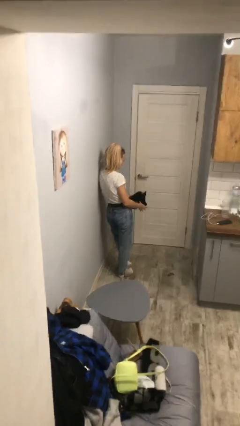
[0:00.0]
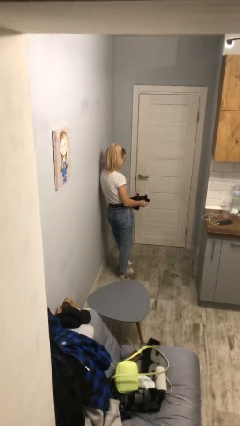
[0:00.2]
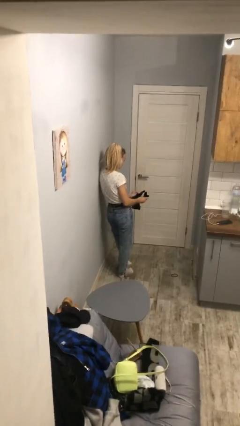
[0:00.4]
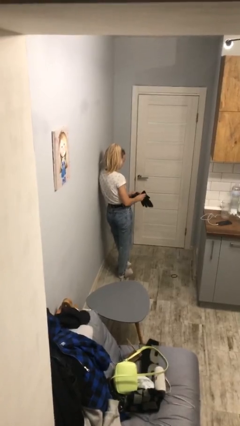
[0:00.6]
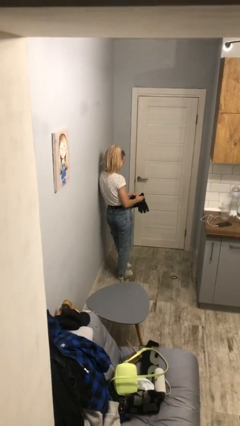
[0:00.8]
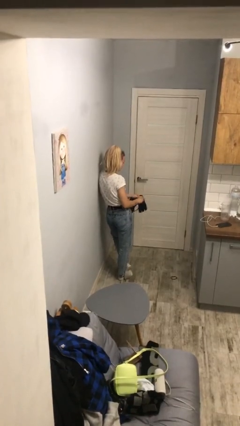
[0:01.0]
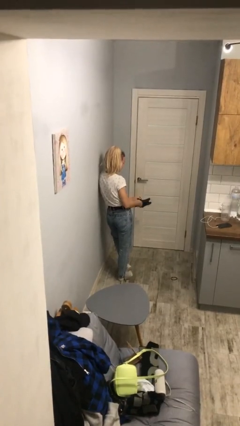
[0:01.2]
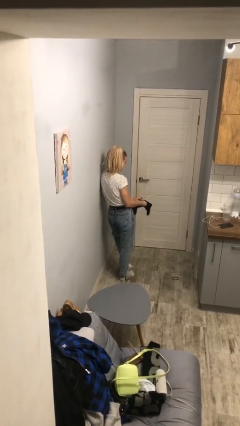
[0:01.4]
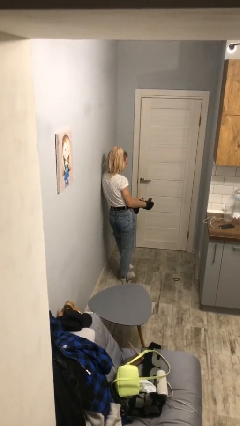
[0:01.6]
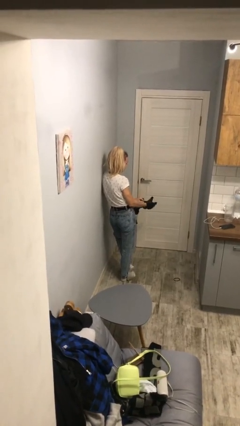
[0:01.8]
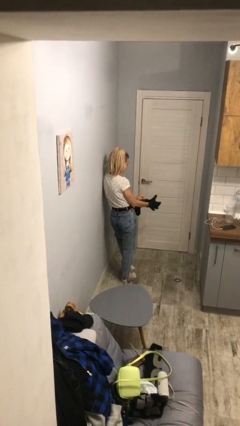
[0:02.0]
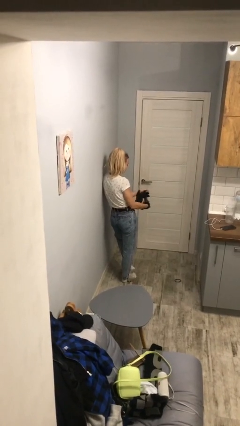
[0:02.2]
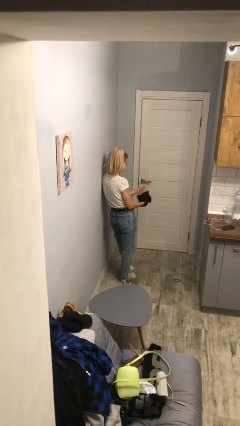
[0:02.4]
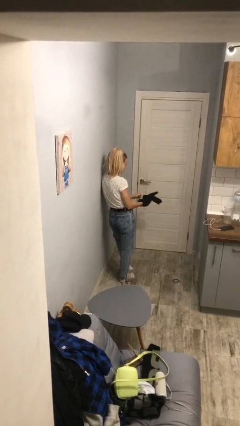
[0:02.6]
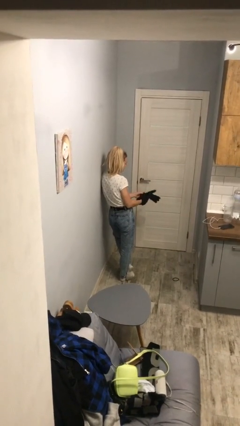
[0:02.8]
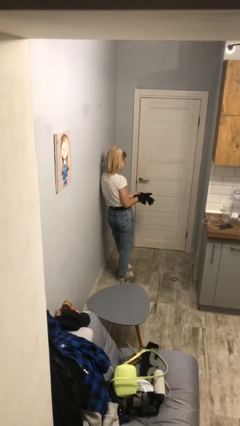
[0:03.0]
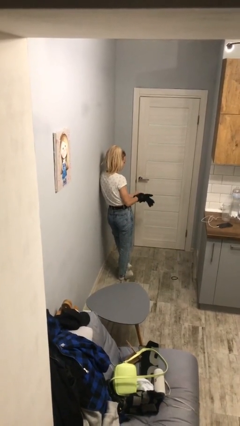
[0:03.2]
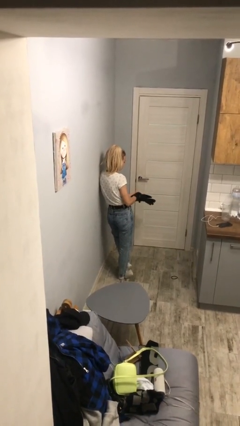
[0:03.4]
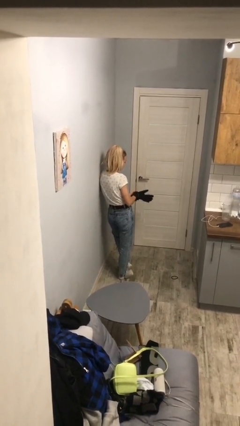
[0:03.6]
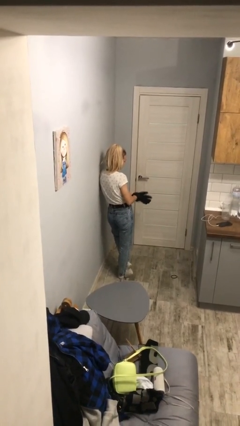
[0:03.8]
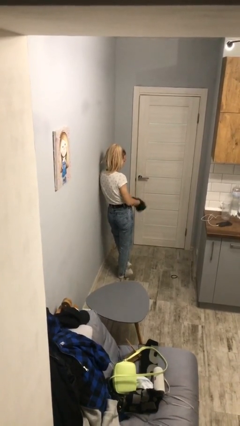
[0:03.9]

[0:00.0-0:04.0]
person puts on gloves

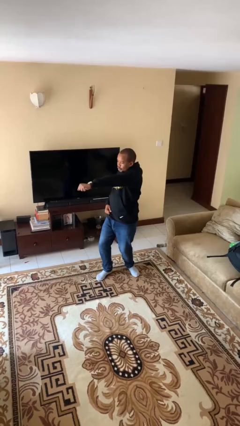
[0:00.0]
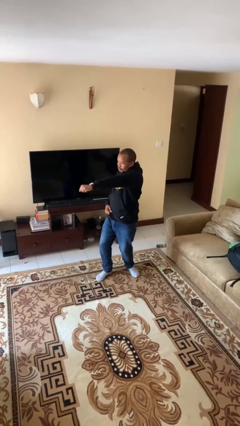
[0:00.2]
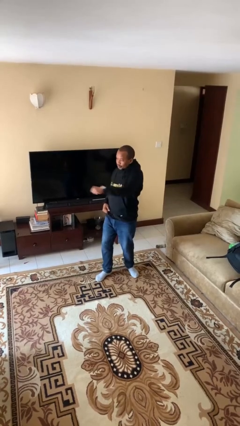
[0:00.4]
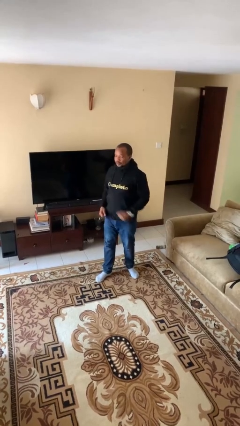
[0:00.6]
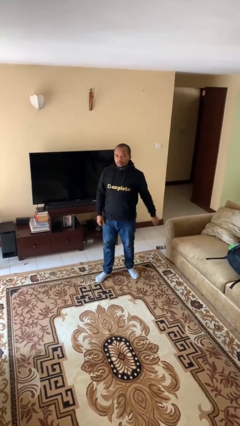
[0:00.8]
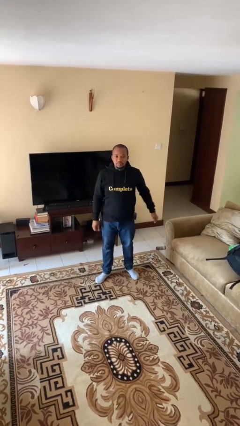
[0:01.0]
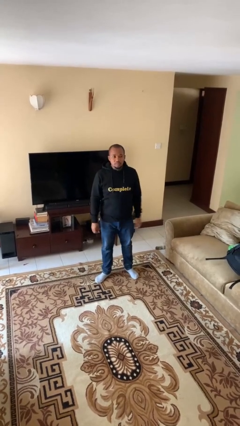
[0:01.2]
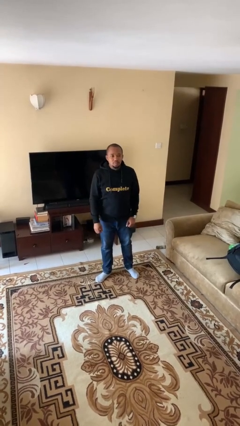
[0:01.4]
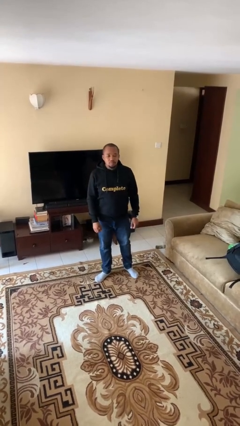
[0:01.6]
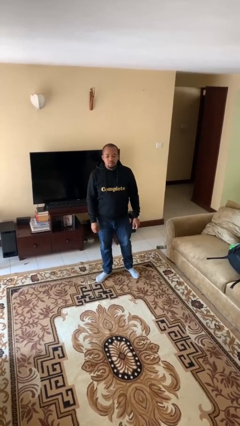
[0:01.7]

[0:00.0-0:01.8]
person punches

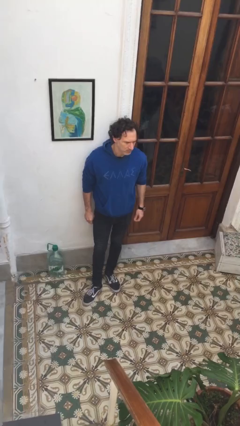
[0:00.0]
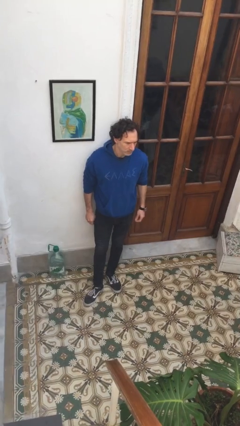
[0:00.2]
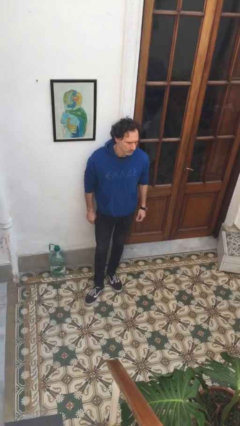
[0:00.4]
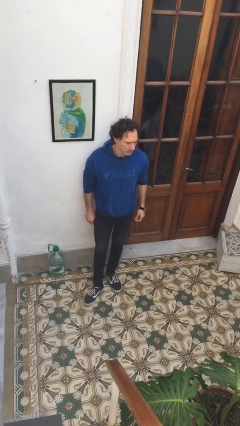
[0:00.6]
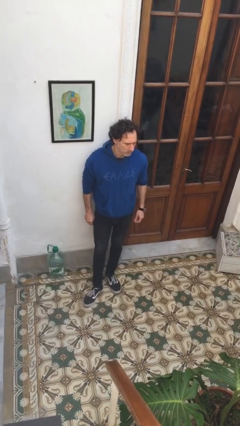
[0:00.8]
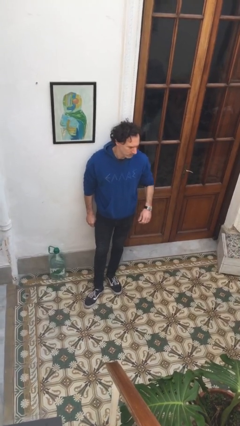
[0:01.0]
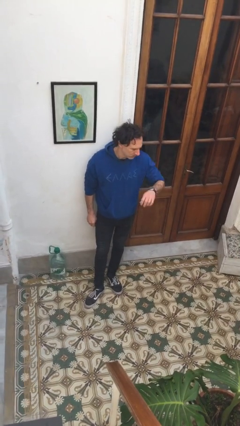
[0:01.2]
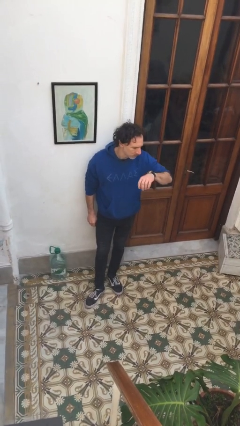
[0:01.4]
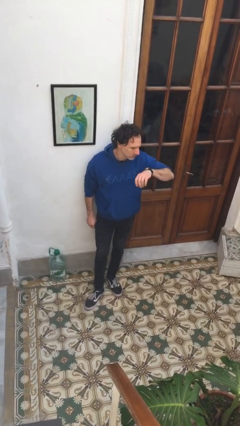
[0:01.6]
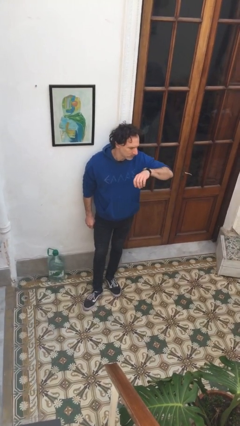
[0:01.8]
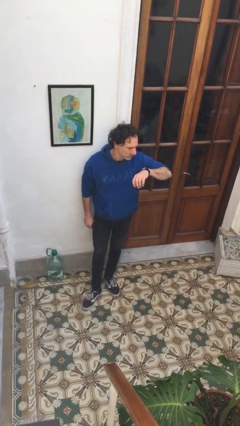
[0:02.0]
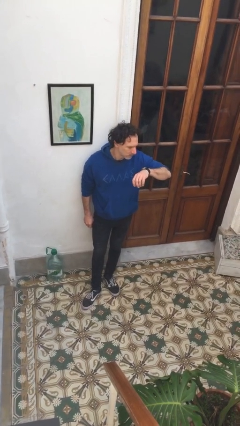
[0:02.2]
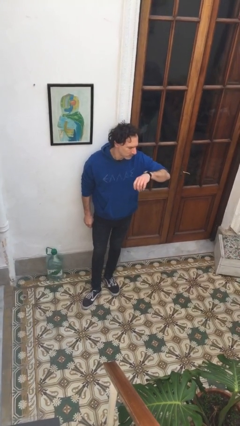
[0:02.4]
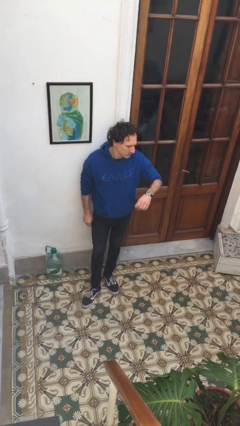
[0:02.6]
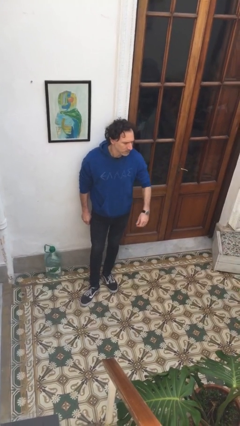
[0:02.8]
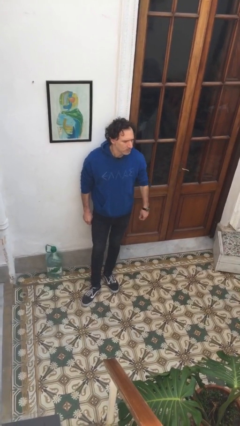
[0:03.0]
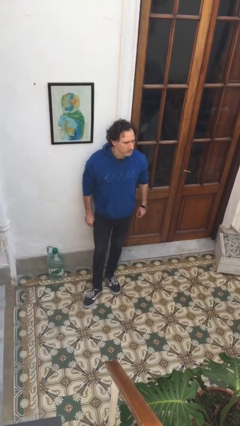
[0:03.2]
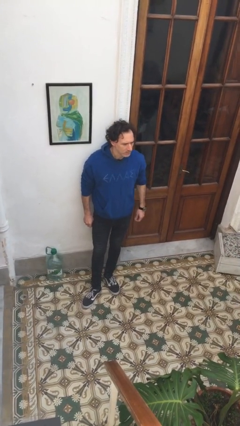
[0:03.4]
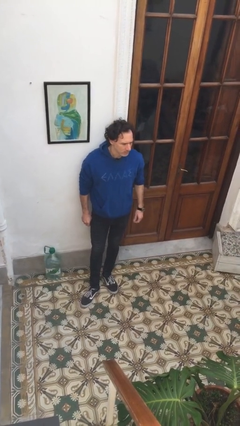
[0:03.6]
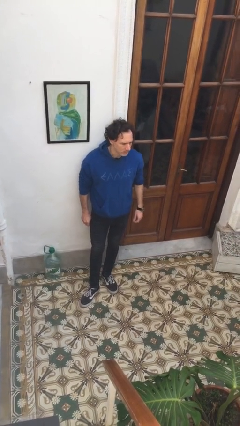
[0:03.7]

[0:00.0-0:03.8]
person looks at wristwatch

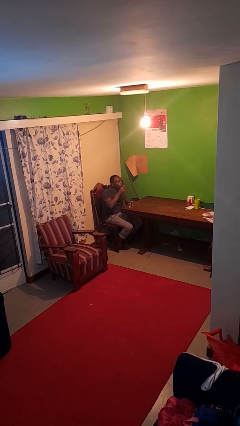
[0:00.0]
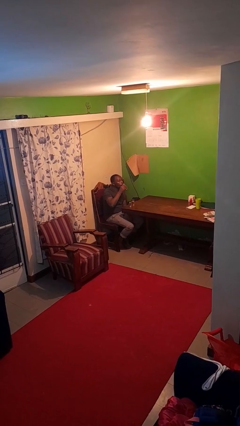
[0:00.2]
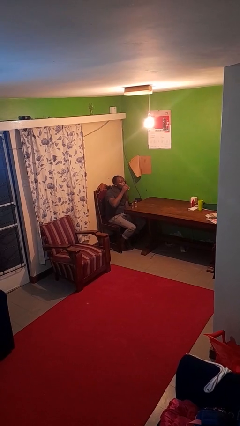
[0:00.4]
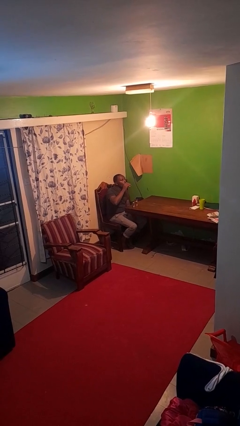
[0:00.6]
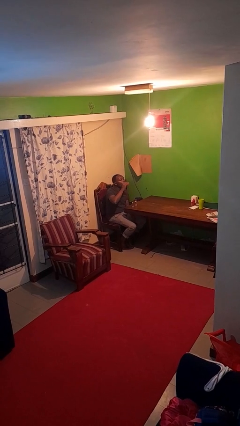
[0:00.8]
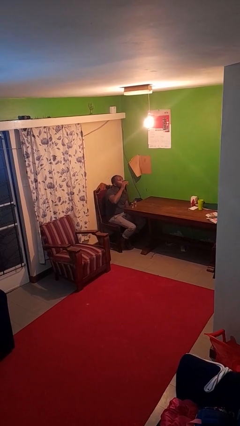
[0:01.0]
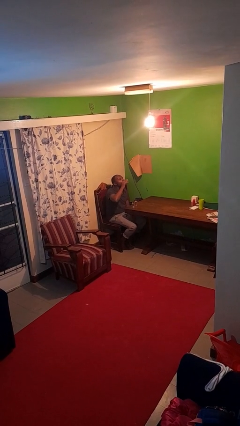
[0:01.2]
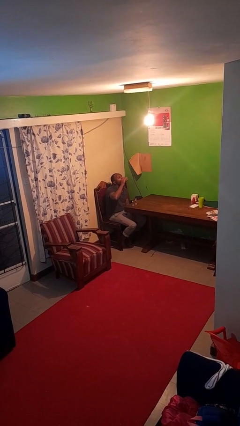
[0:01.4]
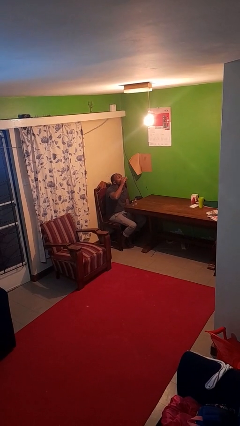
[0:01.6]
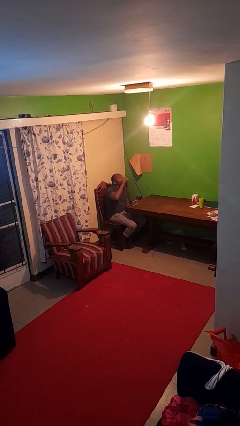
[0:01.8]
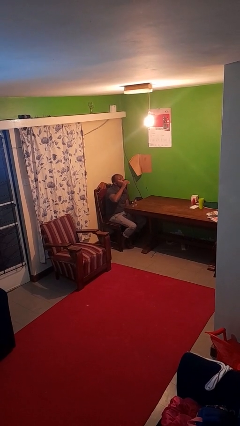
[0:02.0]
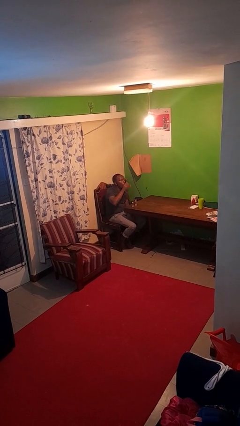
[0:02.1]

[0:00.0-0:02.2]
person drinks from shotglass

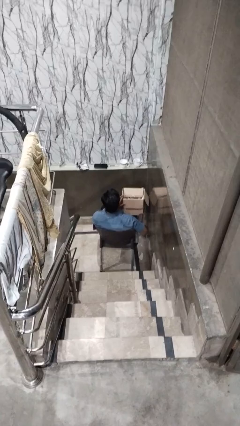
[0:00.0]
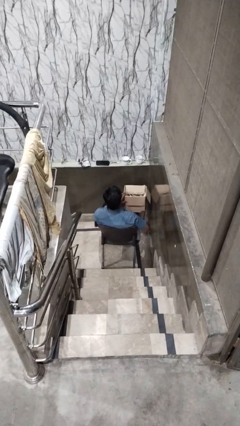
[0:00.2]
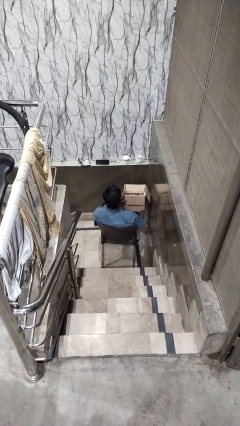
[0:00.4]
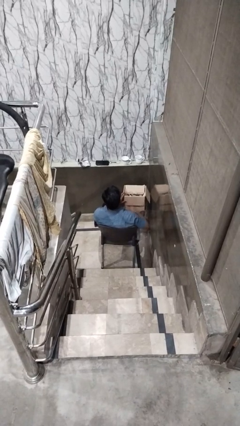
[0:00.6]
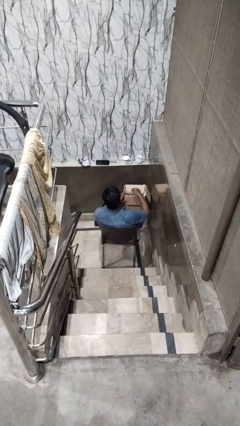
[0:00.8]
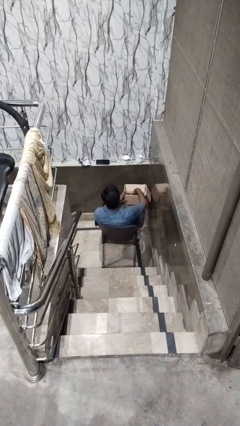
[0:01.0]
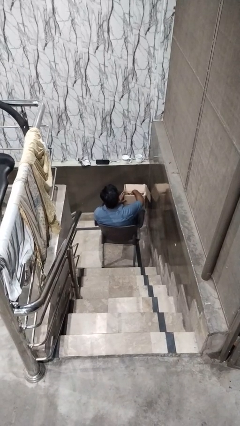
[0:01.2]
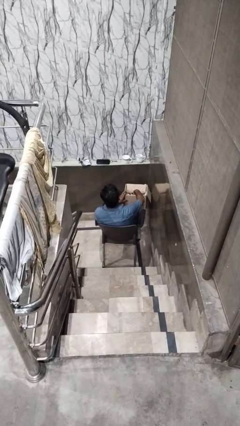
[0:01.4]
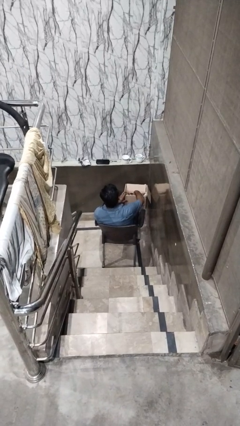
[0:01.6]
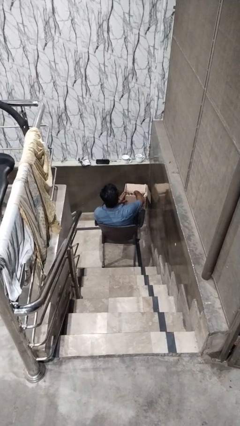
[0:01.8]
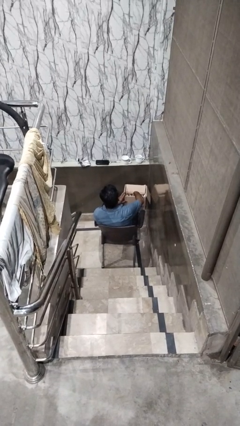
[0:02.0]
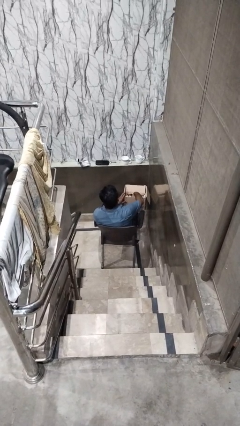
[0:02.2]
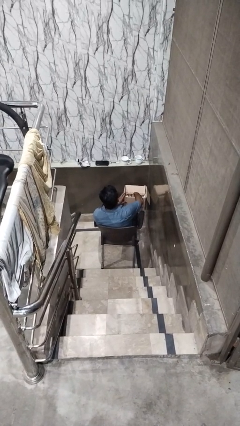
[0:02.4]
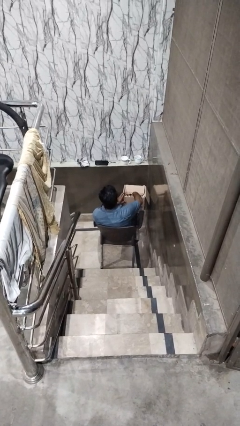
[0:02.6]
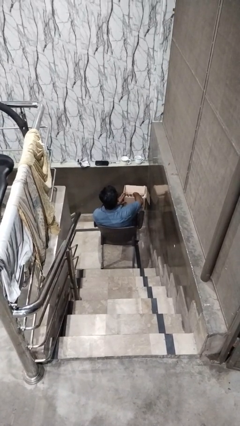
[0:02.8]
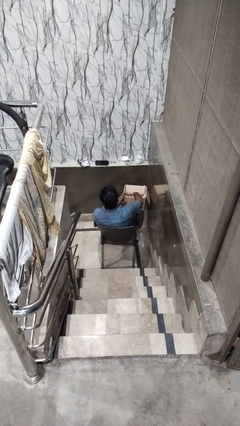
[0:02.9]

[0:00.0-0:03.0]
person searches in box

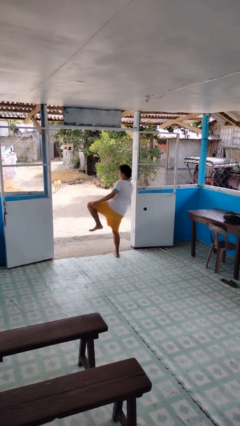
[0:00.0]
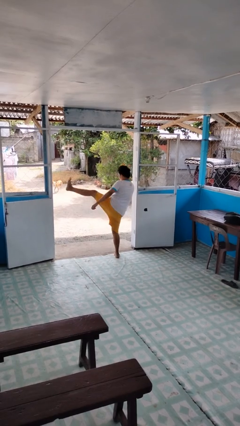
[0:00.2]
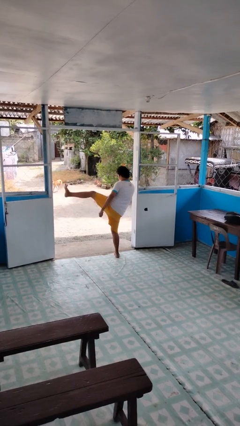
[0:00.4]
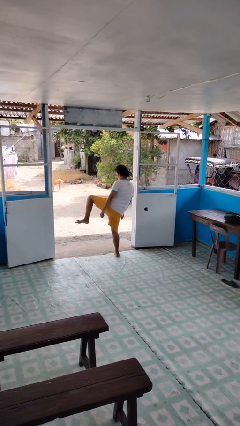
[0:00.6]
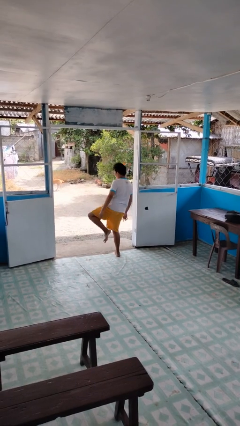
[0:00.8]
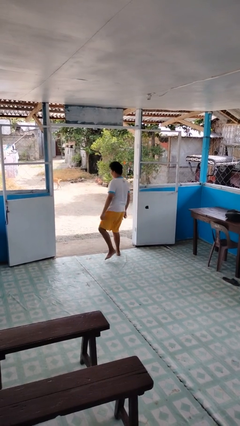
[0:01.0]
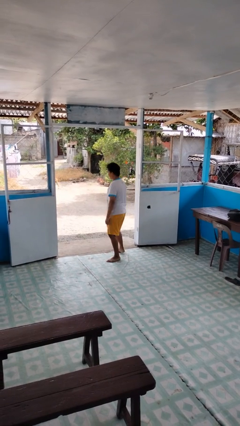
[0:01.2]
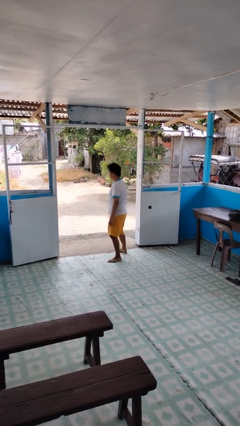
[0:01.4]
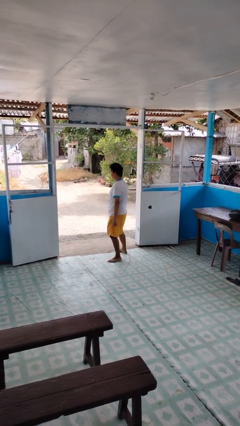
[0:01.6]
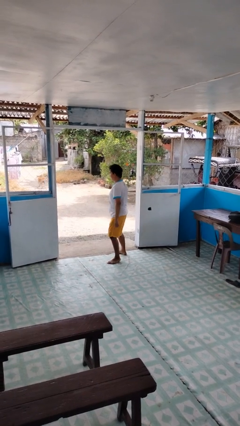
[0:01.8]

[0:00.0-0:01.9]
person karate kicks

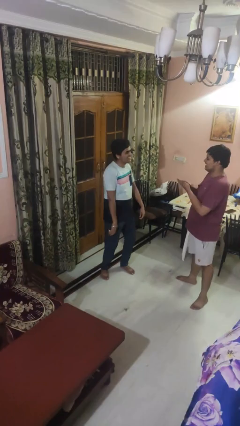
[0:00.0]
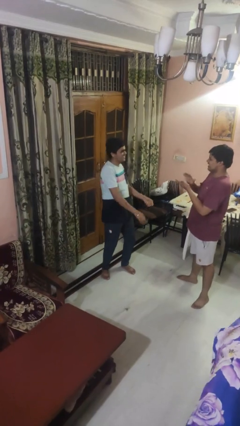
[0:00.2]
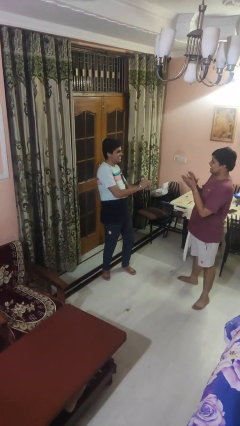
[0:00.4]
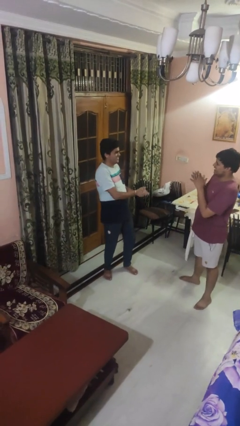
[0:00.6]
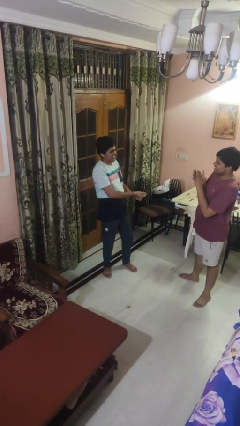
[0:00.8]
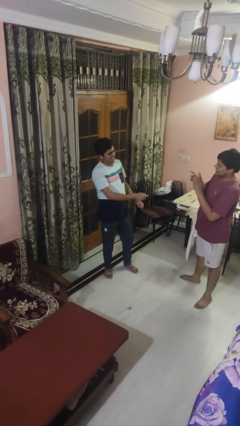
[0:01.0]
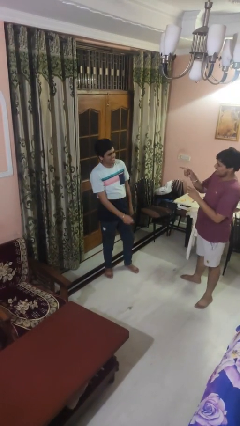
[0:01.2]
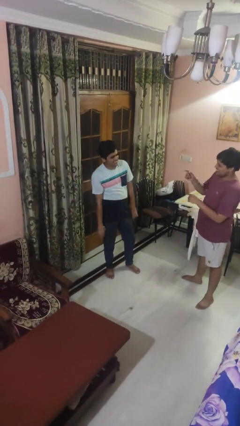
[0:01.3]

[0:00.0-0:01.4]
person laughs with person
